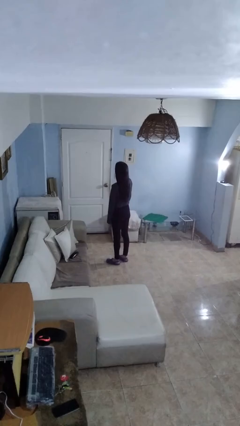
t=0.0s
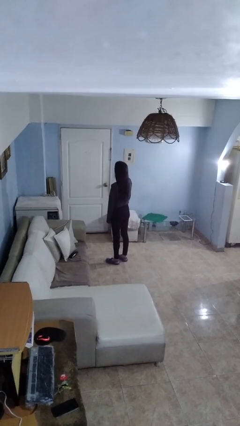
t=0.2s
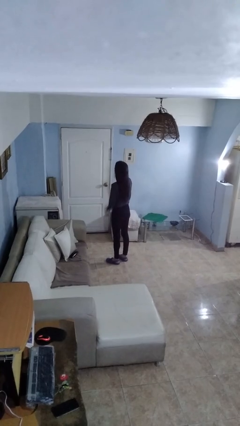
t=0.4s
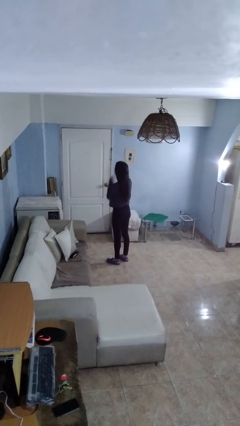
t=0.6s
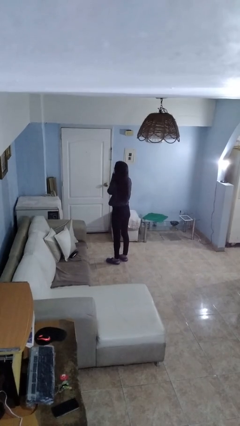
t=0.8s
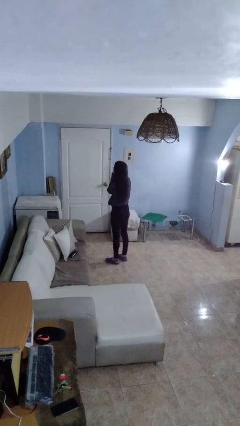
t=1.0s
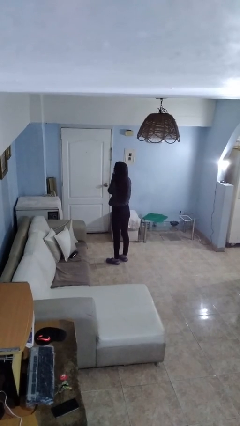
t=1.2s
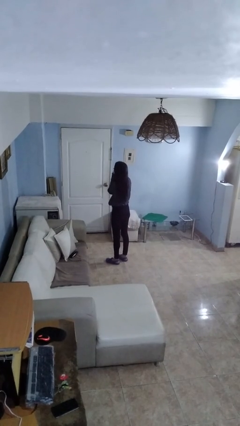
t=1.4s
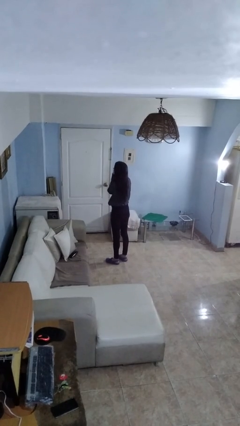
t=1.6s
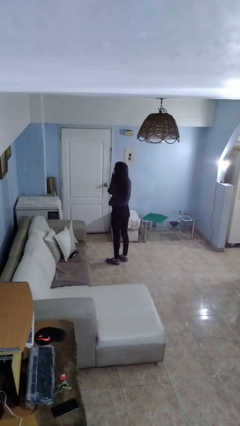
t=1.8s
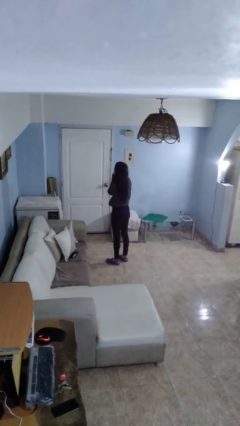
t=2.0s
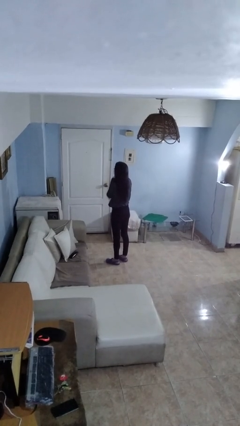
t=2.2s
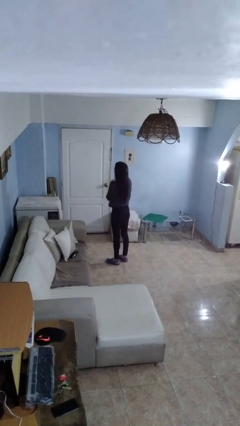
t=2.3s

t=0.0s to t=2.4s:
person strokes chin

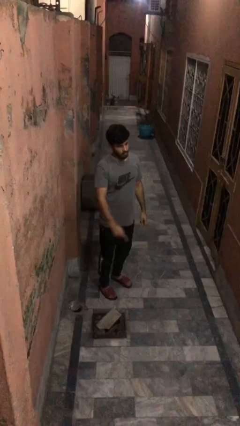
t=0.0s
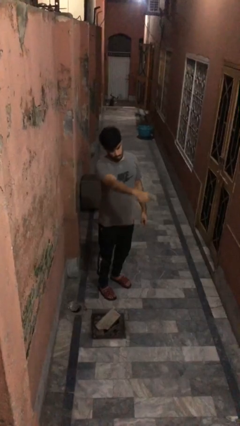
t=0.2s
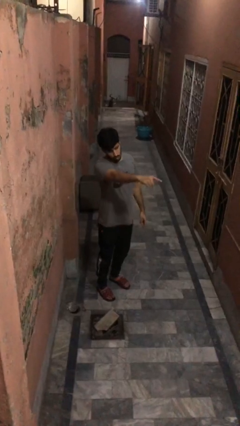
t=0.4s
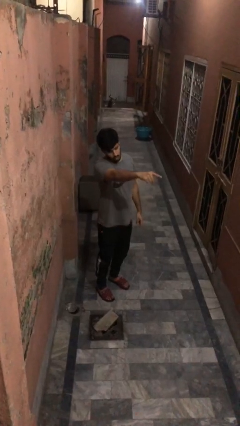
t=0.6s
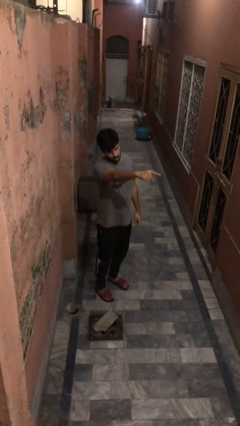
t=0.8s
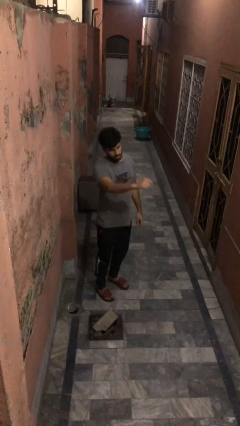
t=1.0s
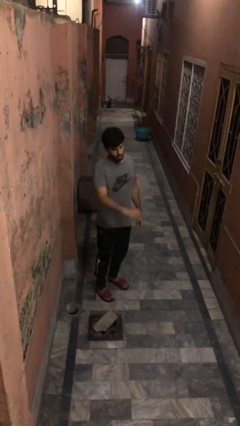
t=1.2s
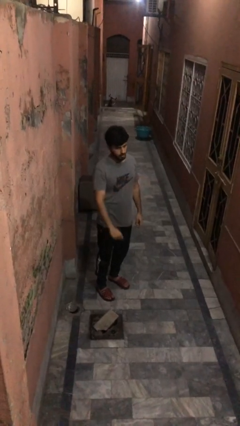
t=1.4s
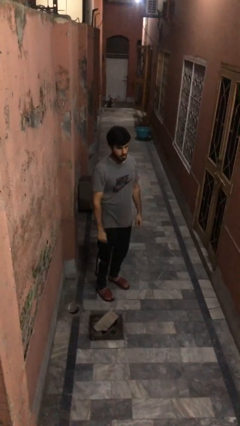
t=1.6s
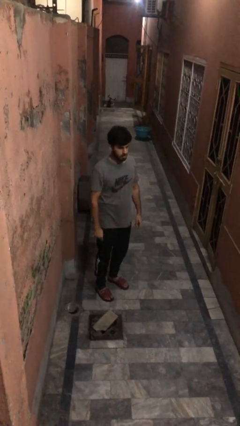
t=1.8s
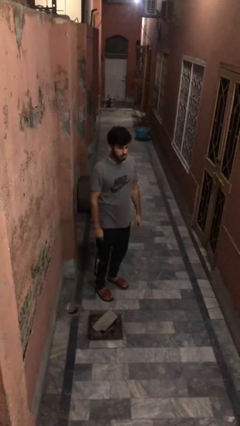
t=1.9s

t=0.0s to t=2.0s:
person points at person

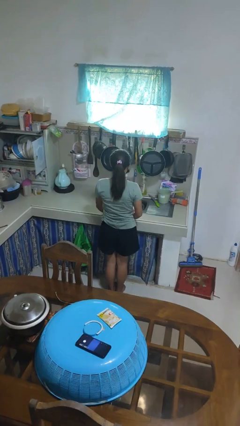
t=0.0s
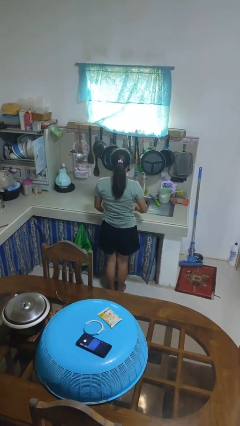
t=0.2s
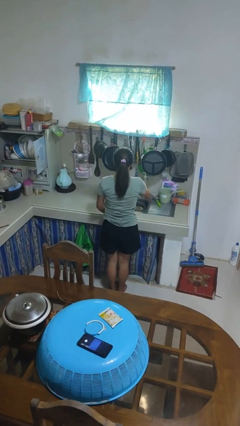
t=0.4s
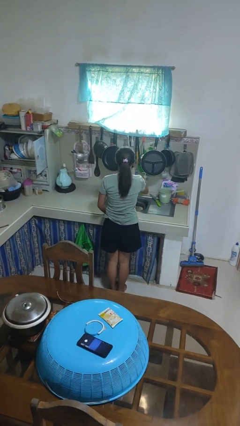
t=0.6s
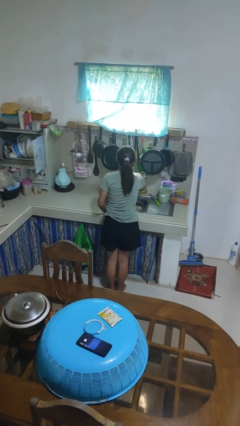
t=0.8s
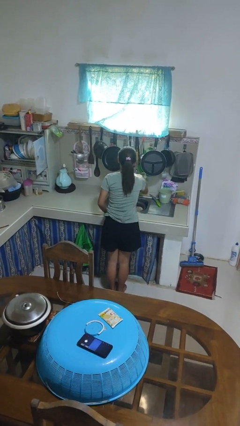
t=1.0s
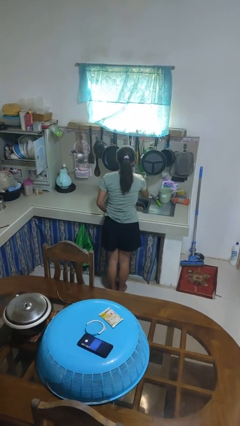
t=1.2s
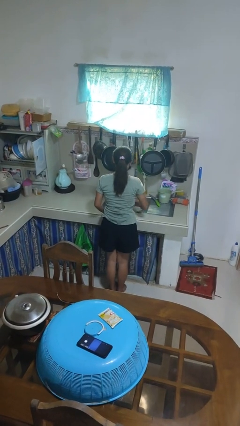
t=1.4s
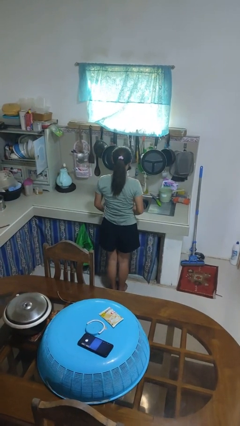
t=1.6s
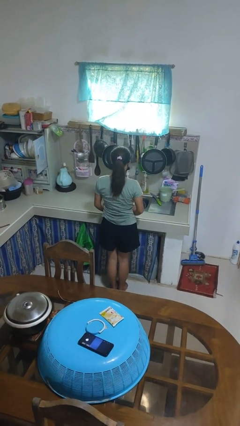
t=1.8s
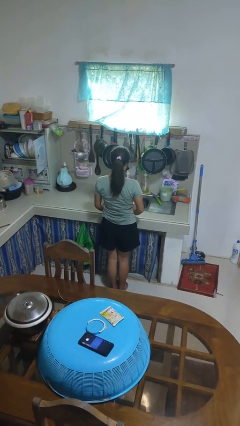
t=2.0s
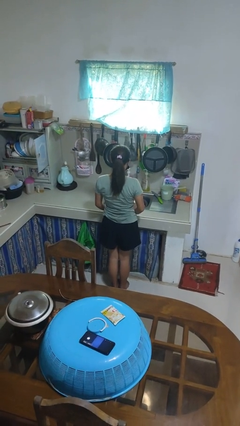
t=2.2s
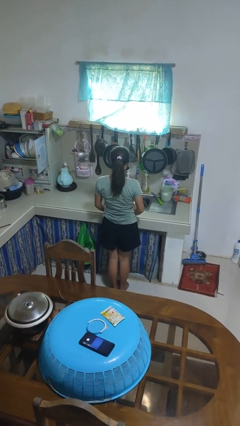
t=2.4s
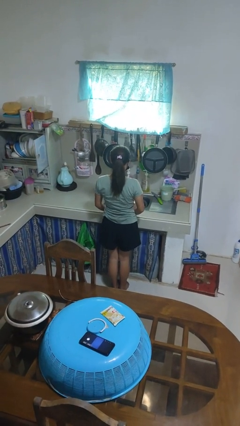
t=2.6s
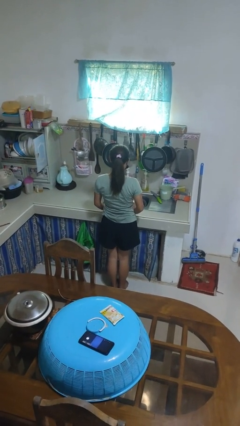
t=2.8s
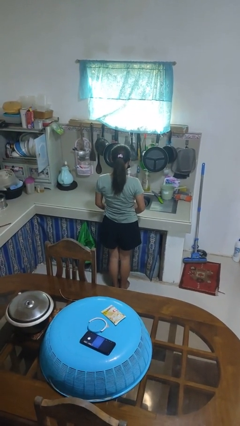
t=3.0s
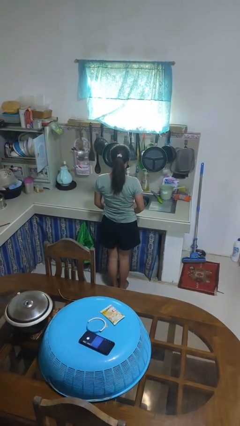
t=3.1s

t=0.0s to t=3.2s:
person turns on faucet

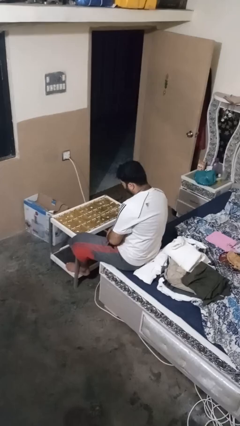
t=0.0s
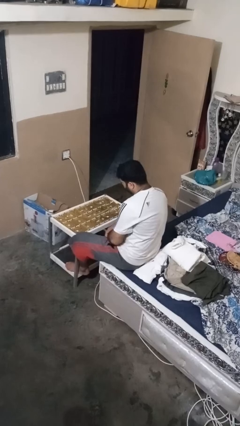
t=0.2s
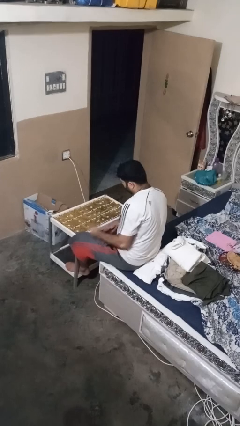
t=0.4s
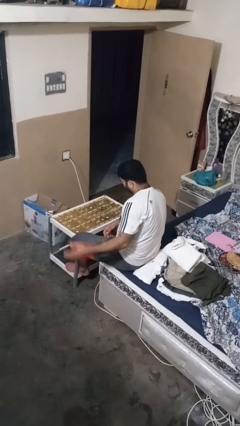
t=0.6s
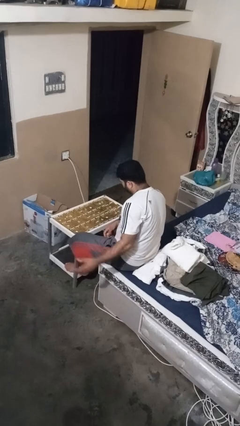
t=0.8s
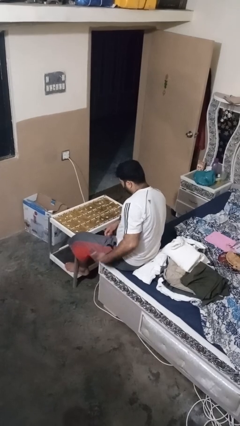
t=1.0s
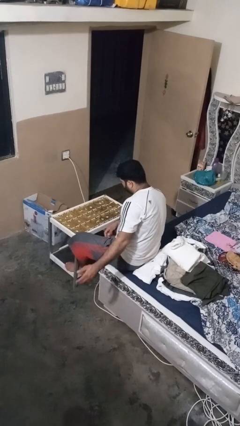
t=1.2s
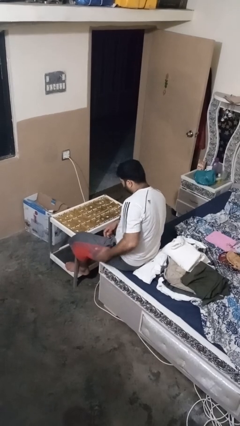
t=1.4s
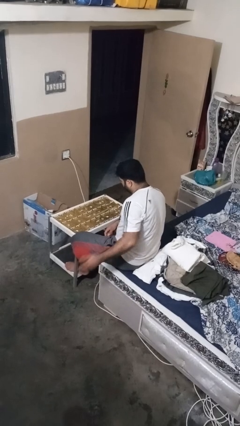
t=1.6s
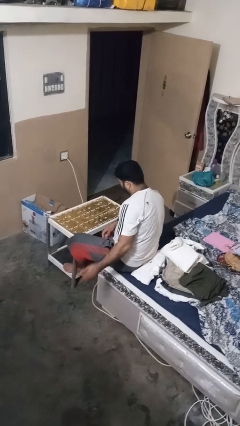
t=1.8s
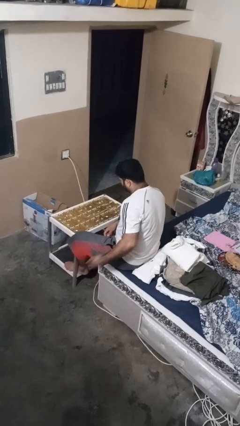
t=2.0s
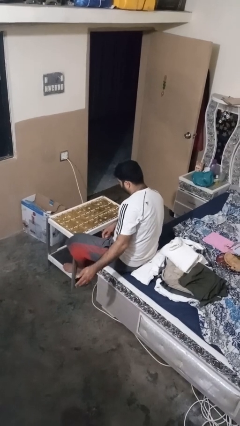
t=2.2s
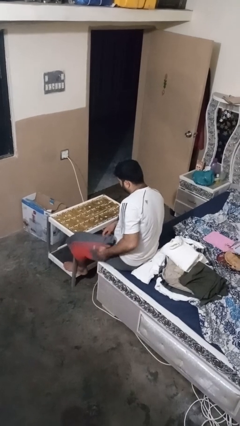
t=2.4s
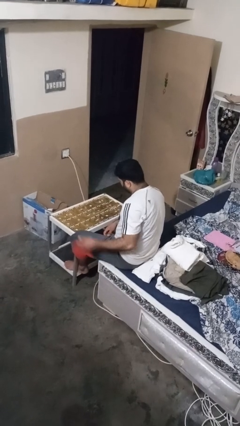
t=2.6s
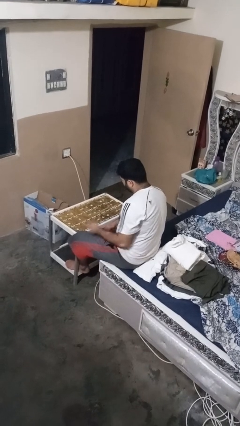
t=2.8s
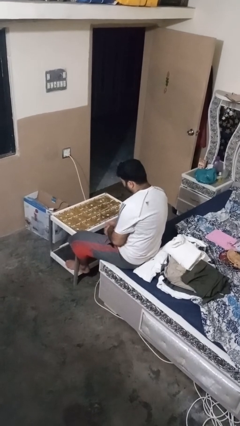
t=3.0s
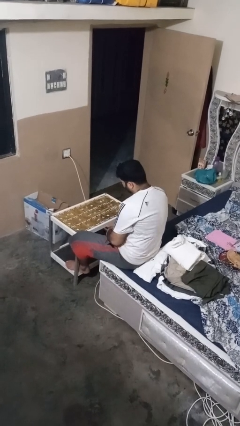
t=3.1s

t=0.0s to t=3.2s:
person slaps hands on thighs

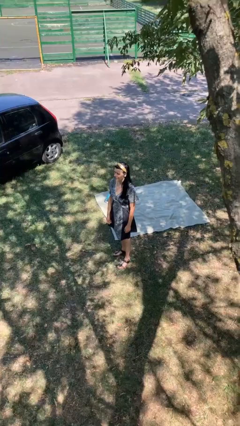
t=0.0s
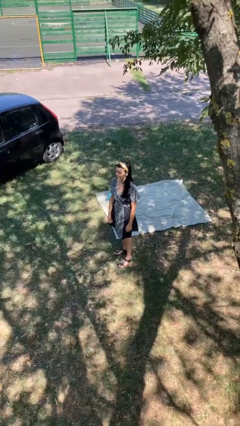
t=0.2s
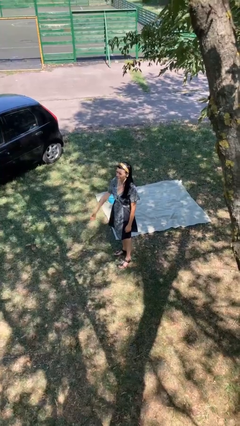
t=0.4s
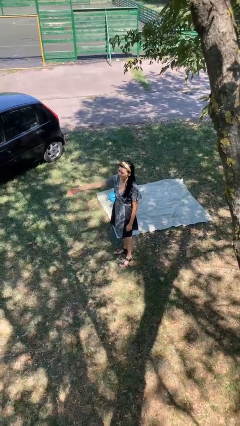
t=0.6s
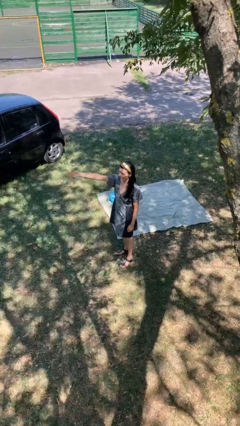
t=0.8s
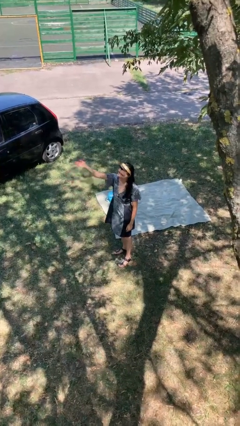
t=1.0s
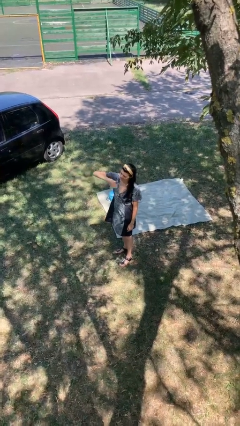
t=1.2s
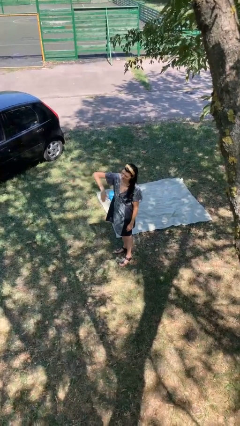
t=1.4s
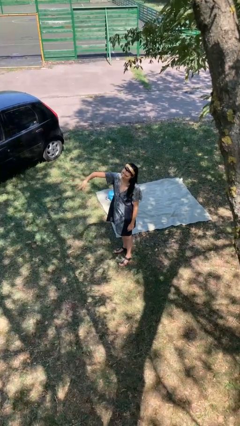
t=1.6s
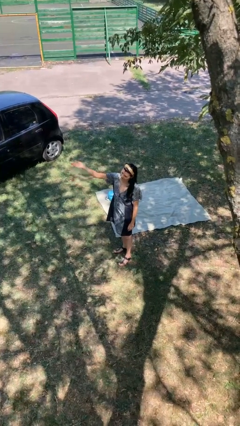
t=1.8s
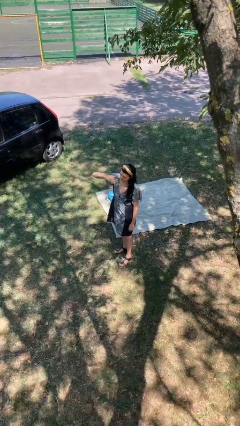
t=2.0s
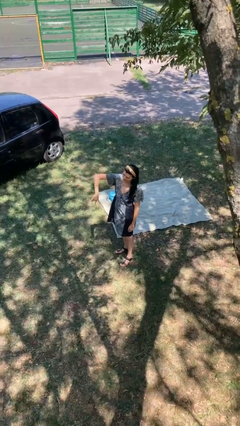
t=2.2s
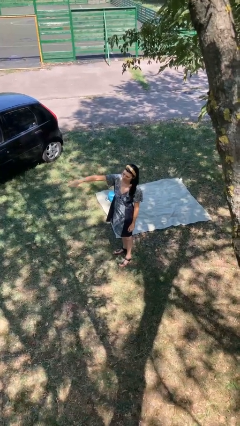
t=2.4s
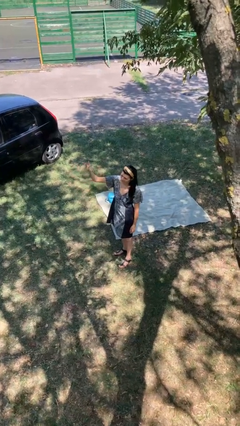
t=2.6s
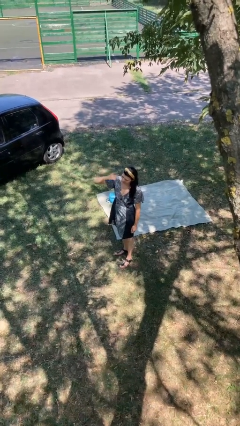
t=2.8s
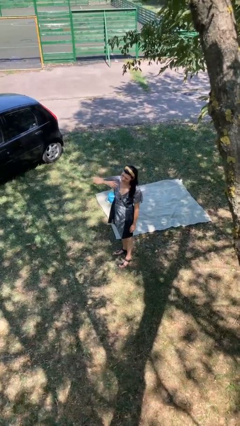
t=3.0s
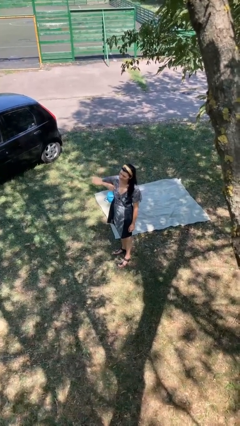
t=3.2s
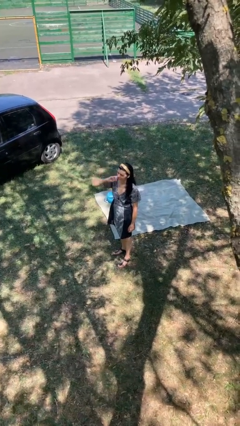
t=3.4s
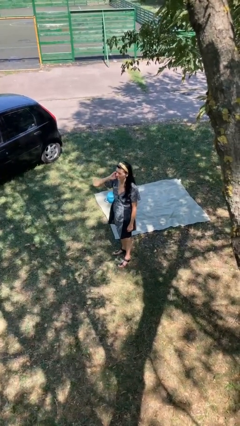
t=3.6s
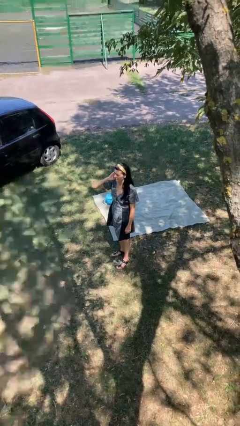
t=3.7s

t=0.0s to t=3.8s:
person gestures come here

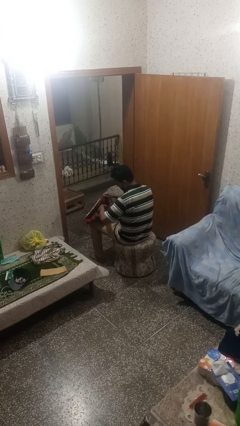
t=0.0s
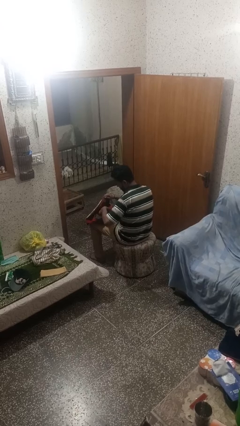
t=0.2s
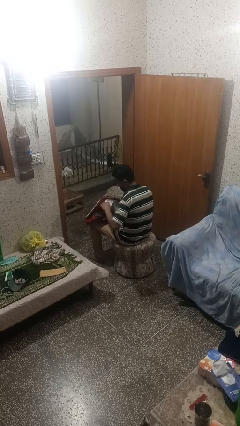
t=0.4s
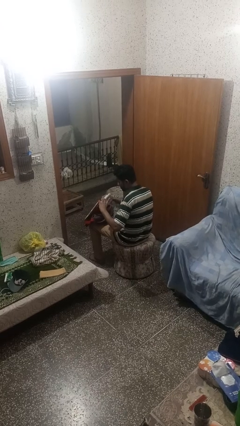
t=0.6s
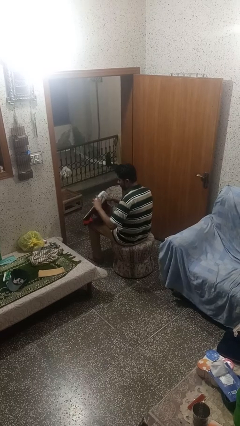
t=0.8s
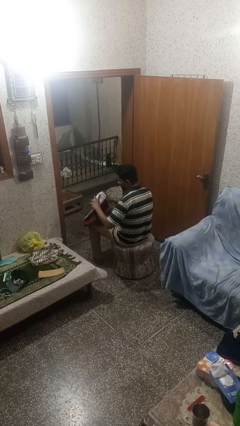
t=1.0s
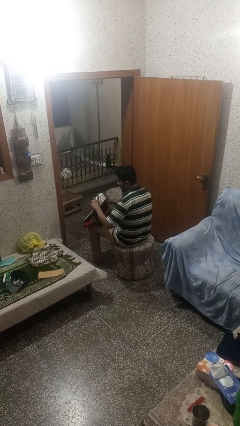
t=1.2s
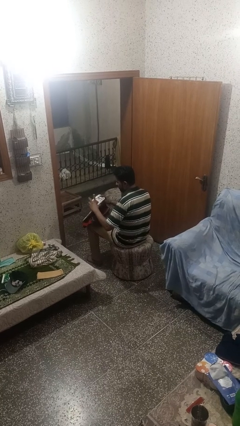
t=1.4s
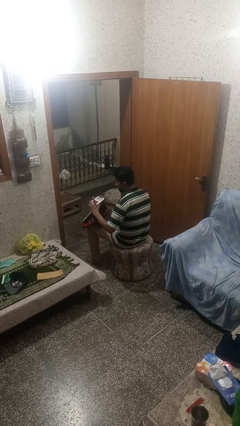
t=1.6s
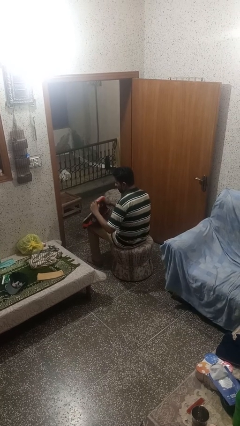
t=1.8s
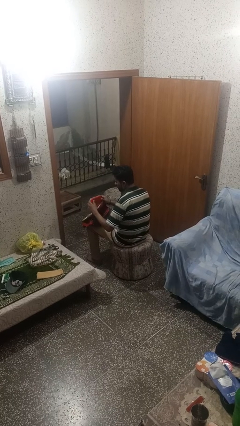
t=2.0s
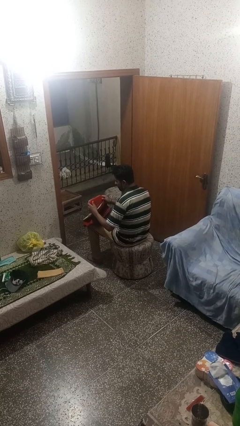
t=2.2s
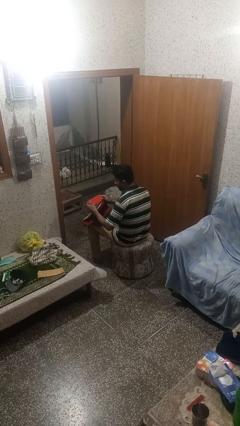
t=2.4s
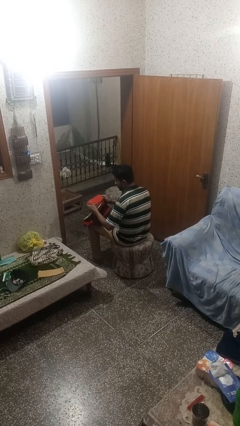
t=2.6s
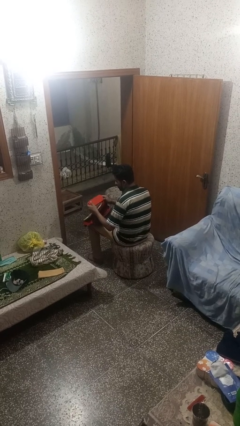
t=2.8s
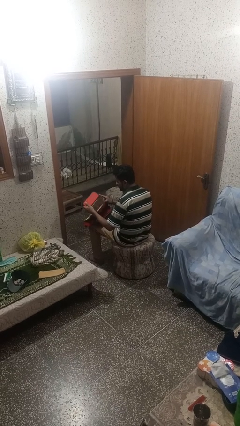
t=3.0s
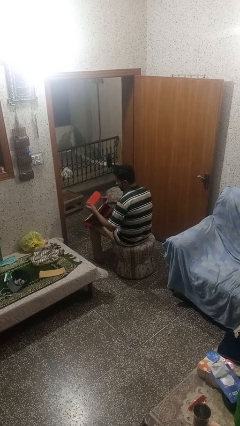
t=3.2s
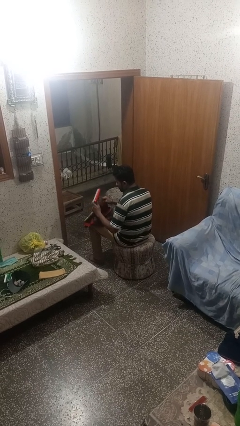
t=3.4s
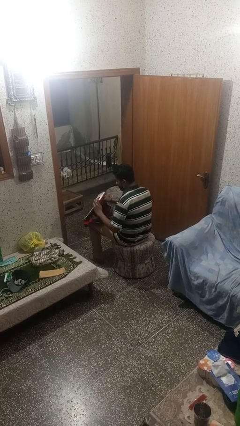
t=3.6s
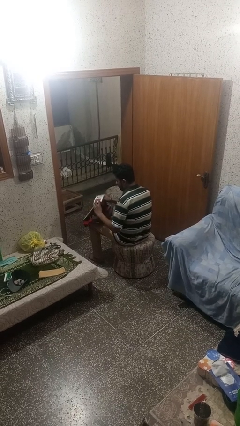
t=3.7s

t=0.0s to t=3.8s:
person takes object from backpack
